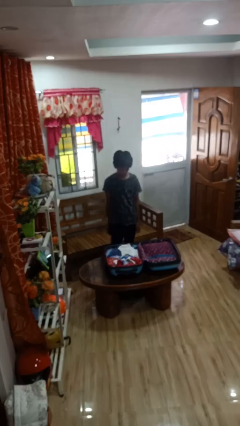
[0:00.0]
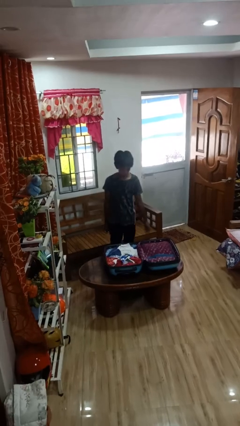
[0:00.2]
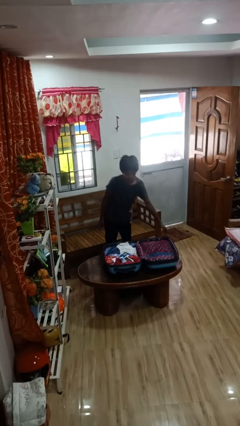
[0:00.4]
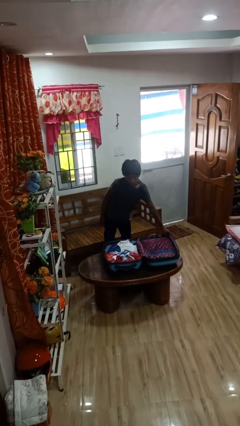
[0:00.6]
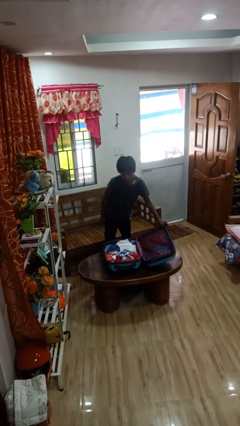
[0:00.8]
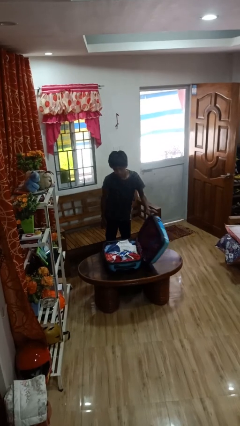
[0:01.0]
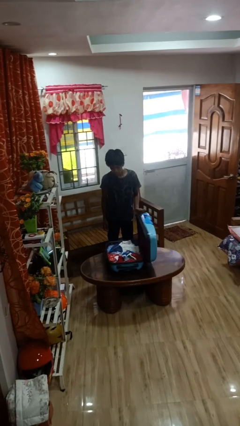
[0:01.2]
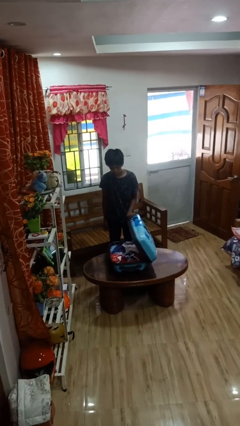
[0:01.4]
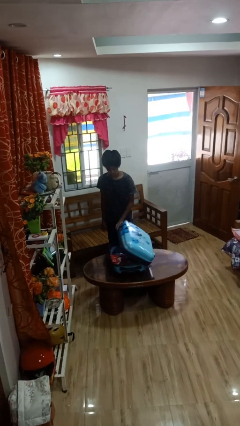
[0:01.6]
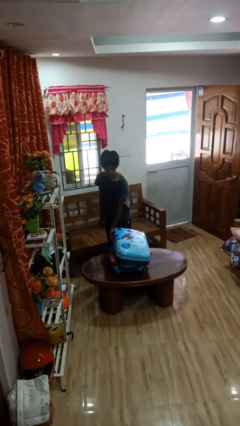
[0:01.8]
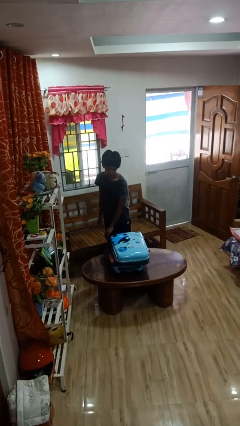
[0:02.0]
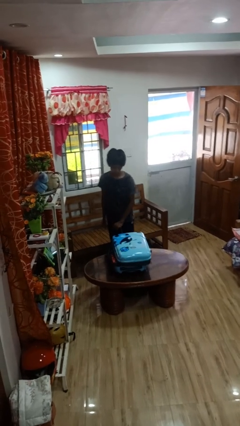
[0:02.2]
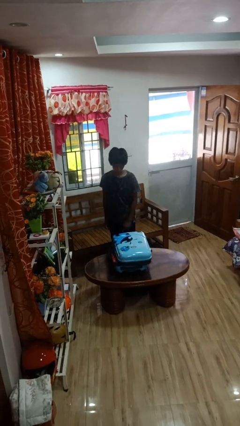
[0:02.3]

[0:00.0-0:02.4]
person closes suitcase

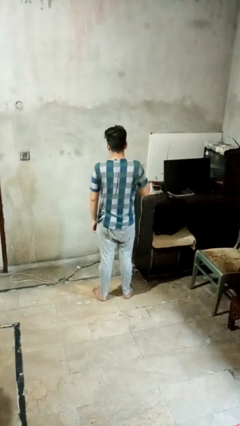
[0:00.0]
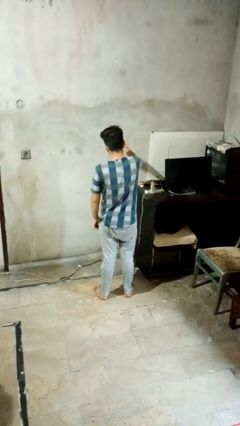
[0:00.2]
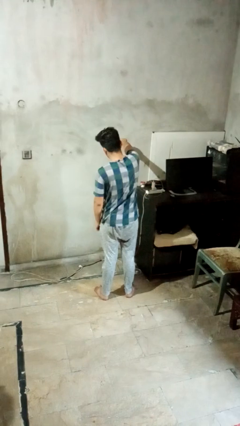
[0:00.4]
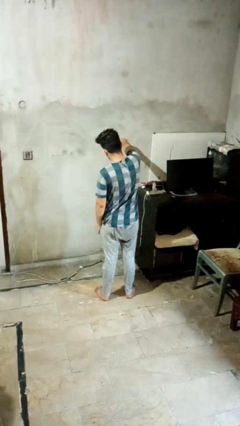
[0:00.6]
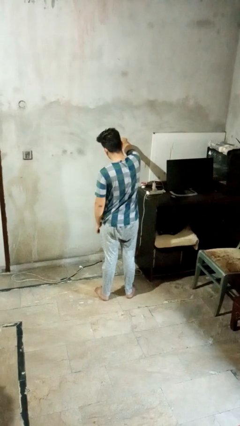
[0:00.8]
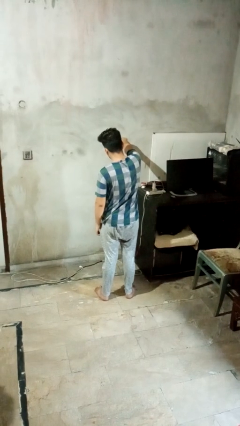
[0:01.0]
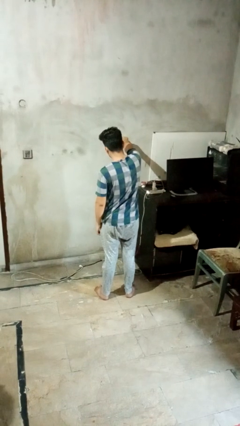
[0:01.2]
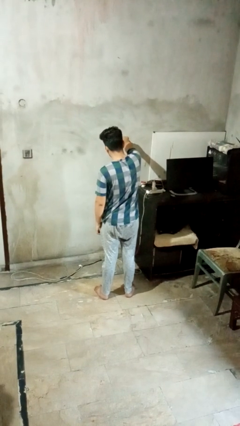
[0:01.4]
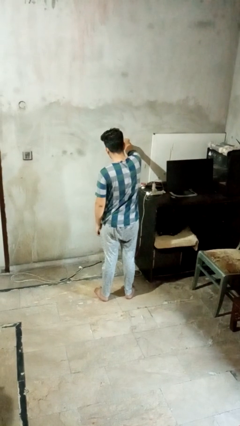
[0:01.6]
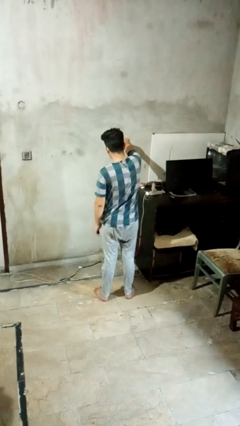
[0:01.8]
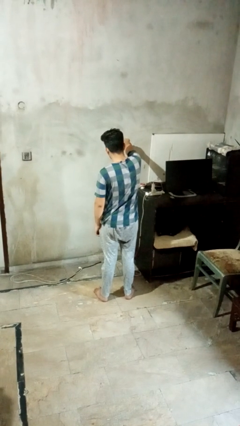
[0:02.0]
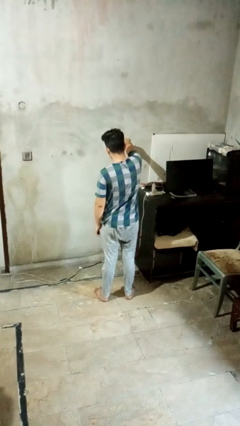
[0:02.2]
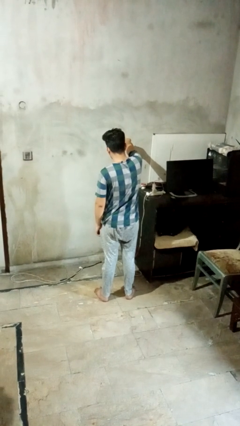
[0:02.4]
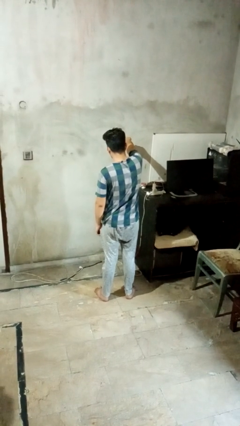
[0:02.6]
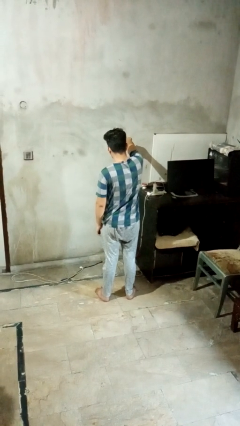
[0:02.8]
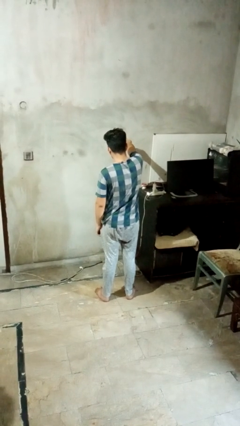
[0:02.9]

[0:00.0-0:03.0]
person punches

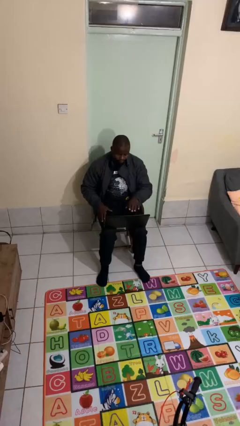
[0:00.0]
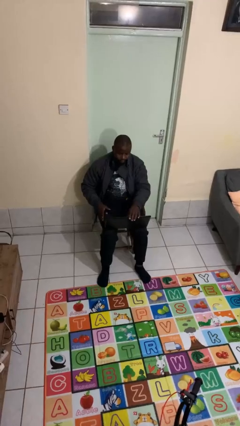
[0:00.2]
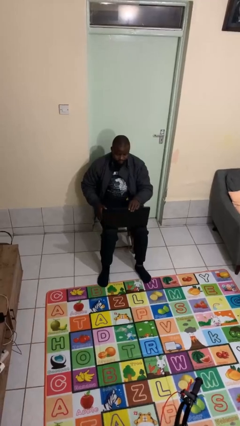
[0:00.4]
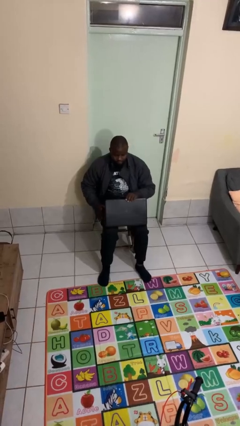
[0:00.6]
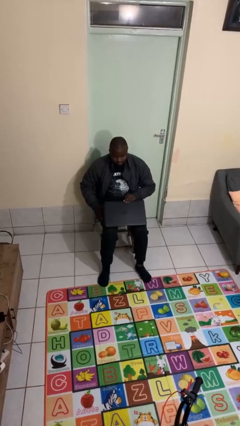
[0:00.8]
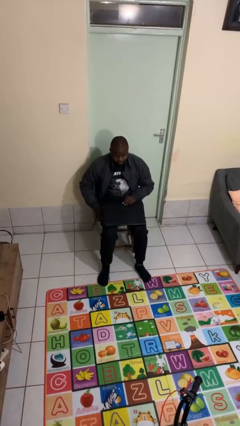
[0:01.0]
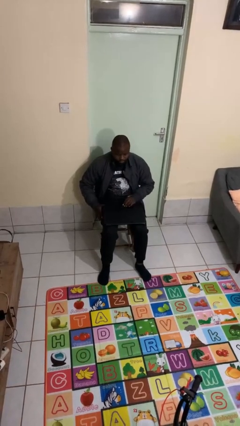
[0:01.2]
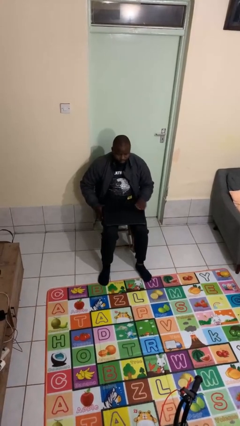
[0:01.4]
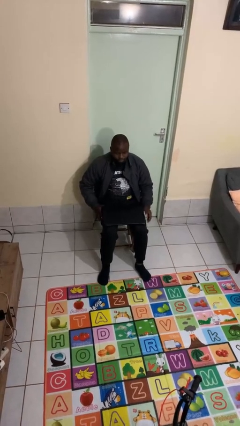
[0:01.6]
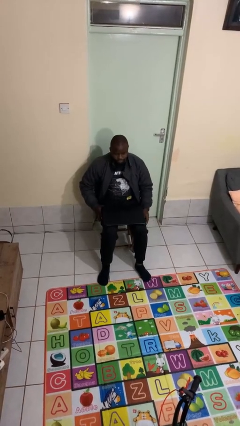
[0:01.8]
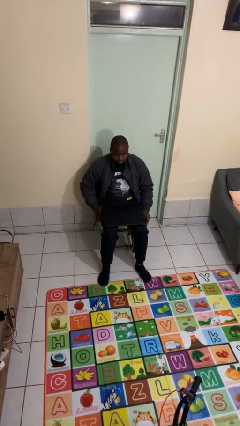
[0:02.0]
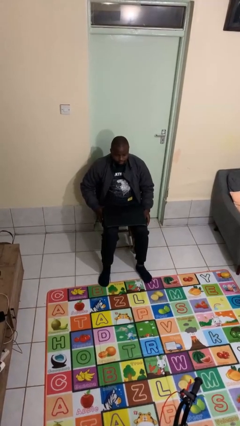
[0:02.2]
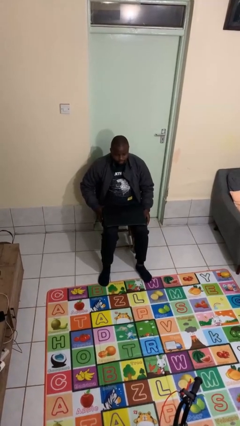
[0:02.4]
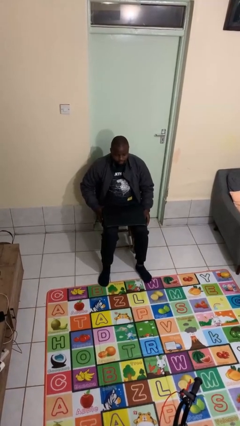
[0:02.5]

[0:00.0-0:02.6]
person closes laptop

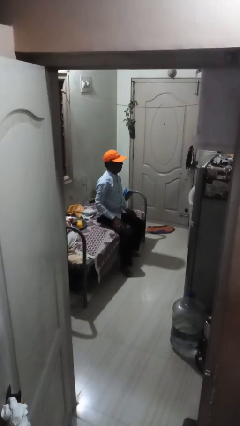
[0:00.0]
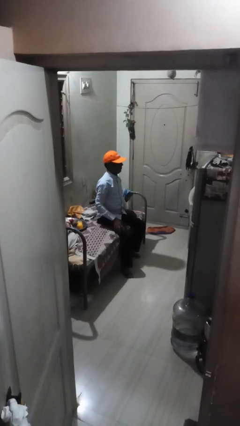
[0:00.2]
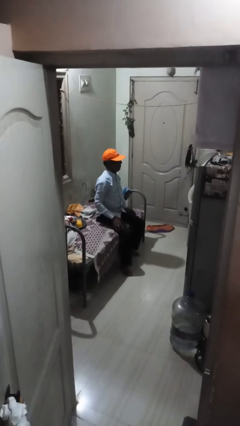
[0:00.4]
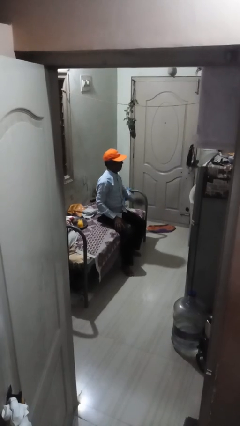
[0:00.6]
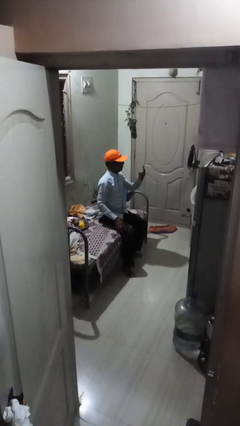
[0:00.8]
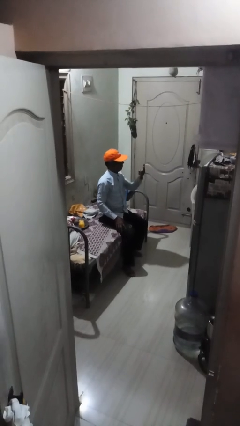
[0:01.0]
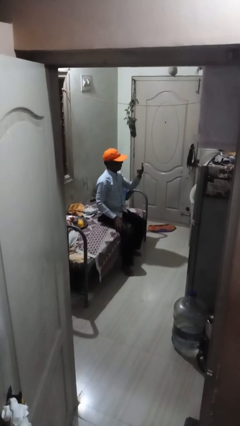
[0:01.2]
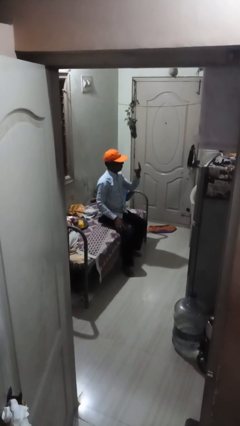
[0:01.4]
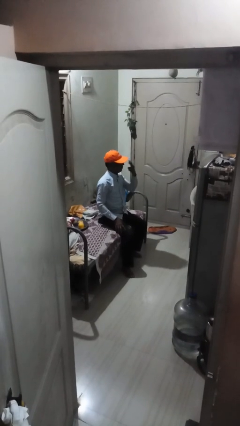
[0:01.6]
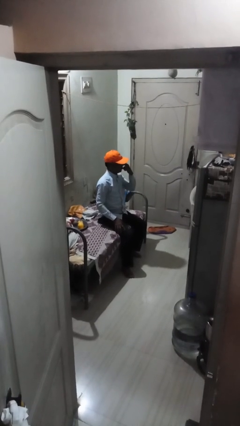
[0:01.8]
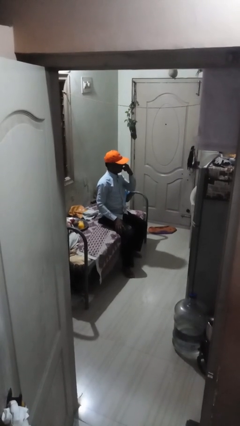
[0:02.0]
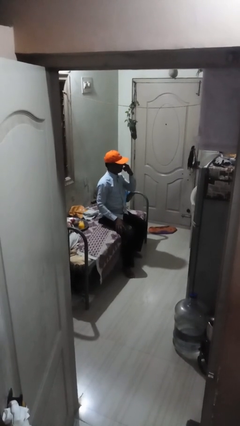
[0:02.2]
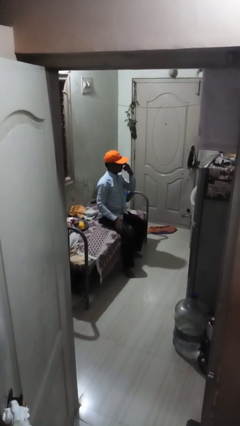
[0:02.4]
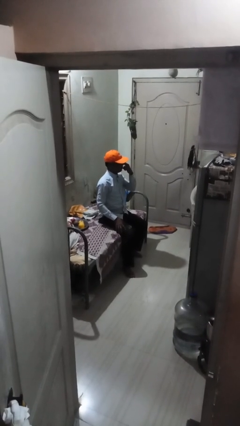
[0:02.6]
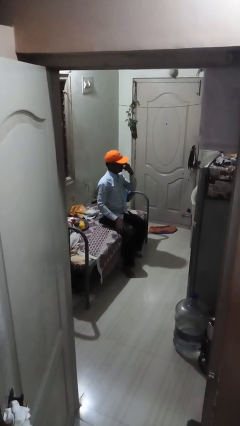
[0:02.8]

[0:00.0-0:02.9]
person gestures watch closely

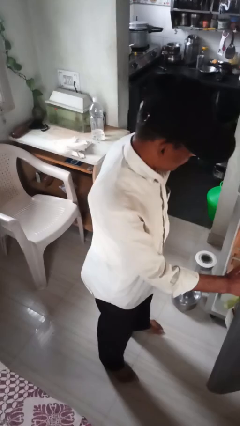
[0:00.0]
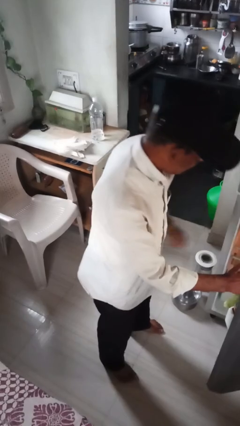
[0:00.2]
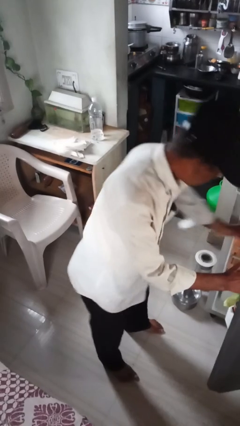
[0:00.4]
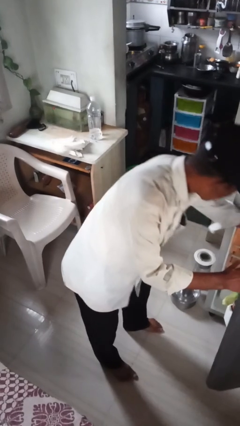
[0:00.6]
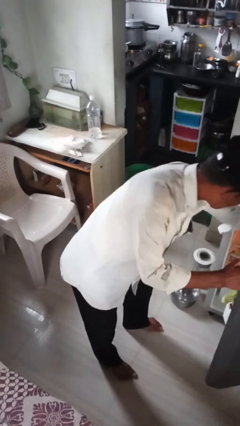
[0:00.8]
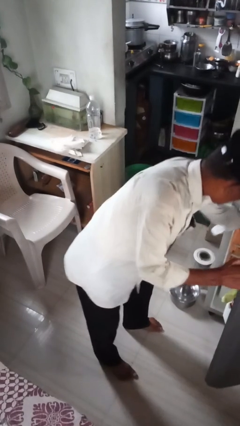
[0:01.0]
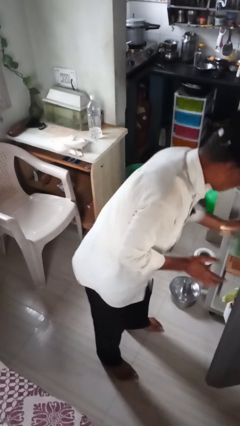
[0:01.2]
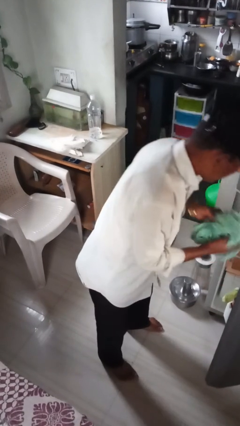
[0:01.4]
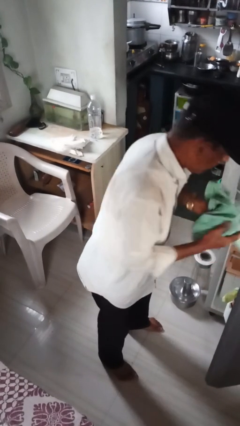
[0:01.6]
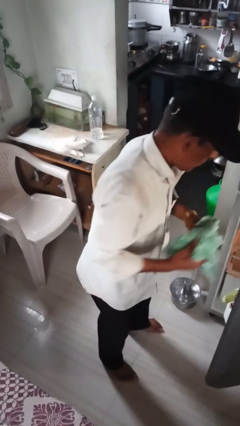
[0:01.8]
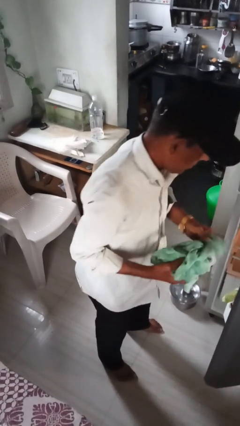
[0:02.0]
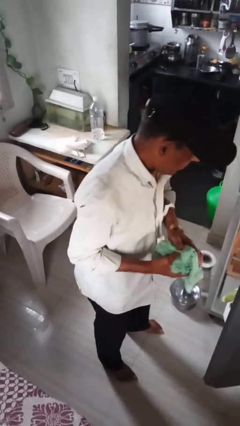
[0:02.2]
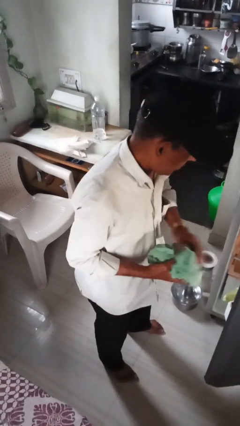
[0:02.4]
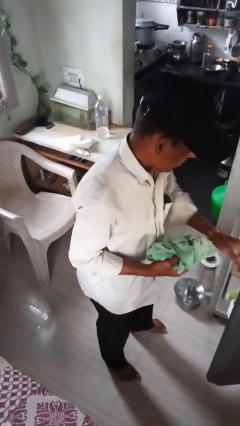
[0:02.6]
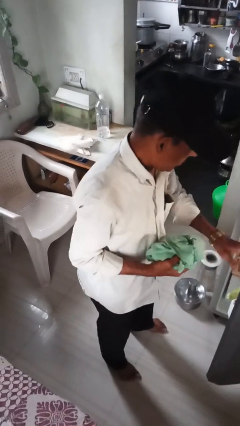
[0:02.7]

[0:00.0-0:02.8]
person unloads clotheswasher

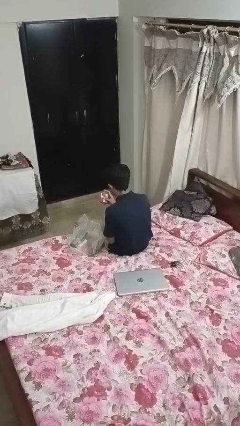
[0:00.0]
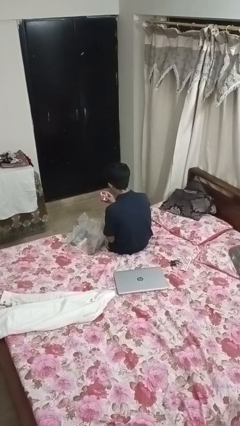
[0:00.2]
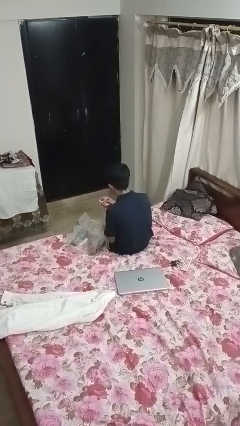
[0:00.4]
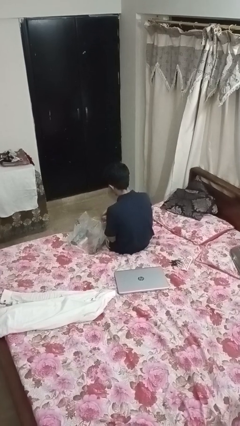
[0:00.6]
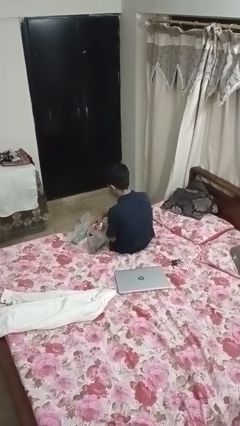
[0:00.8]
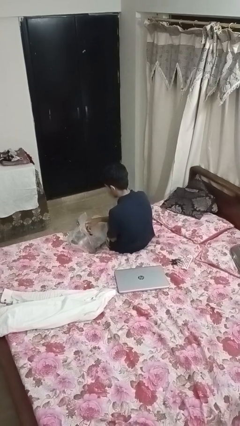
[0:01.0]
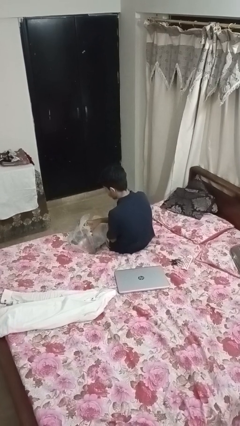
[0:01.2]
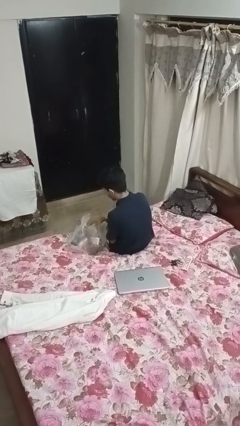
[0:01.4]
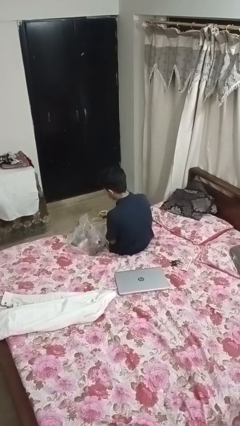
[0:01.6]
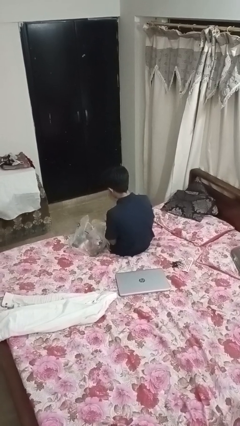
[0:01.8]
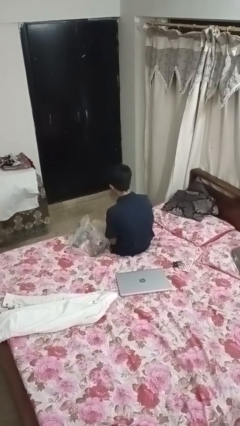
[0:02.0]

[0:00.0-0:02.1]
person puts object into bag

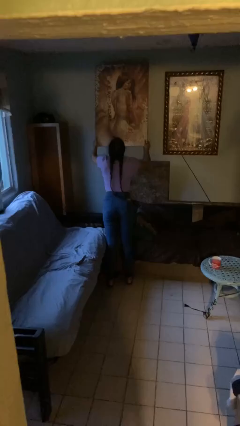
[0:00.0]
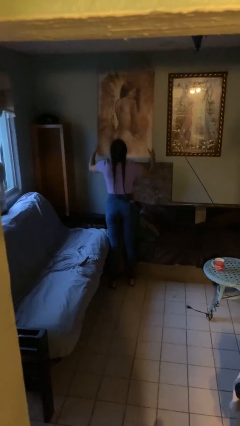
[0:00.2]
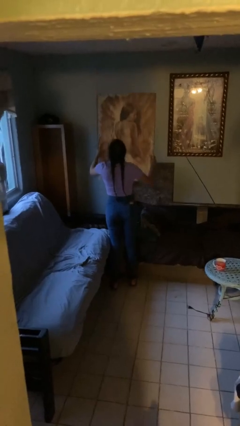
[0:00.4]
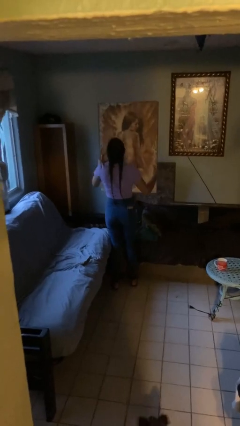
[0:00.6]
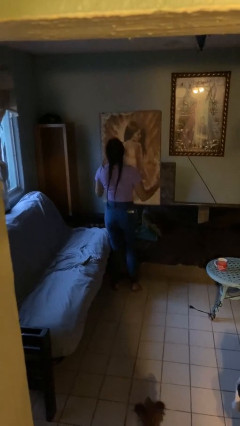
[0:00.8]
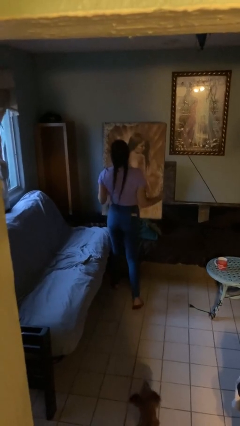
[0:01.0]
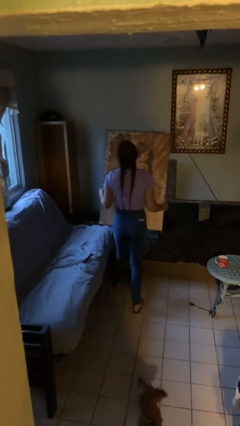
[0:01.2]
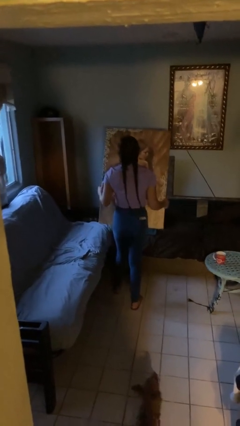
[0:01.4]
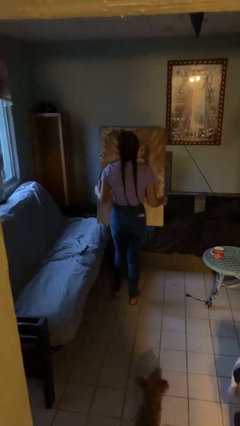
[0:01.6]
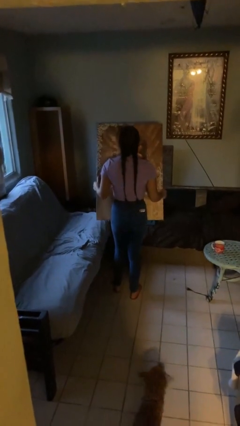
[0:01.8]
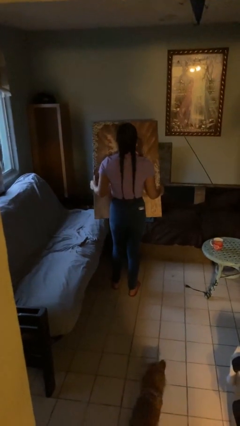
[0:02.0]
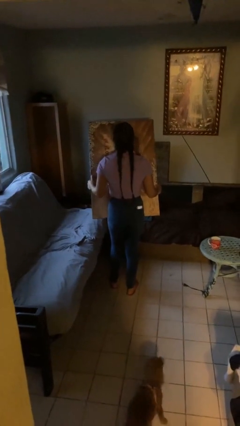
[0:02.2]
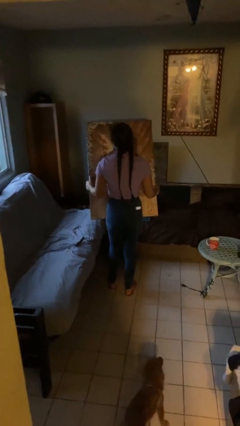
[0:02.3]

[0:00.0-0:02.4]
person takes down picture frame
